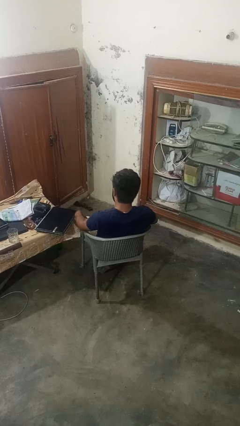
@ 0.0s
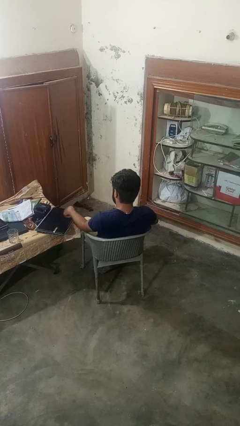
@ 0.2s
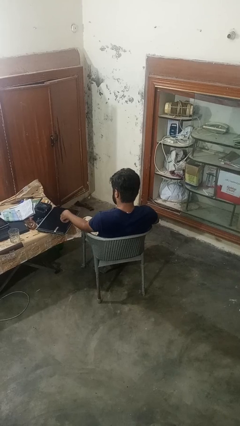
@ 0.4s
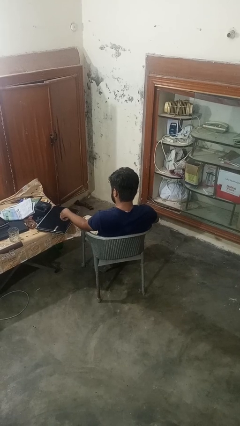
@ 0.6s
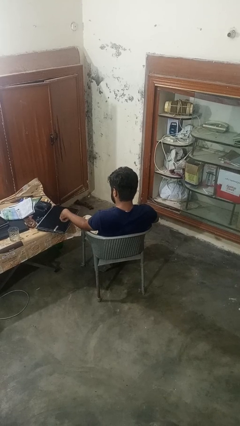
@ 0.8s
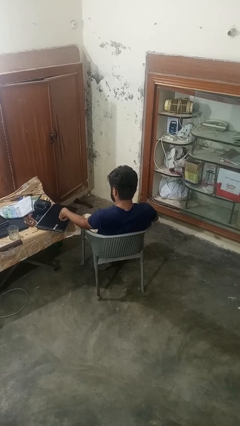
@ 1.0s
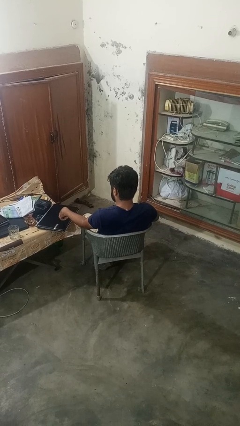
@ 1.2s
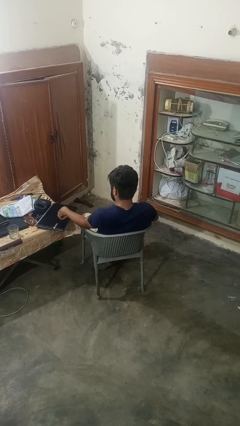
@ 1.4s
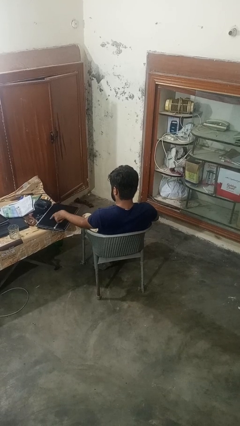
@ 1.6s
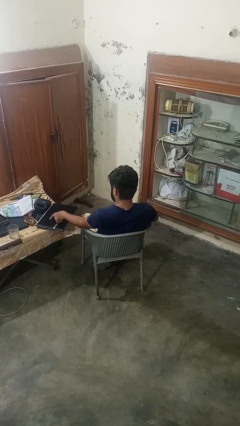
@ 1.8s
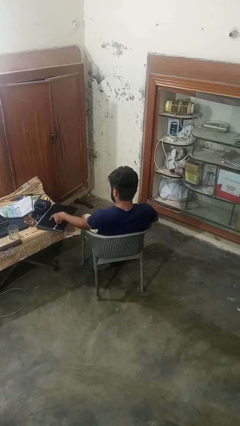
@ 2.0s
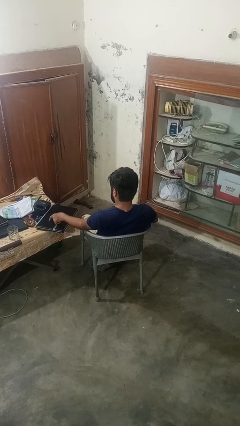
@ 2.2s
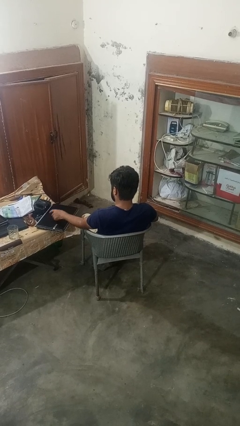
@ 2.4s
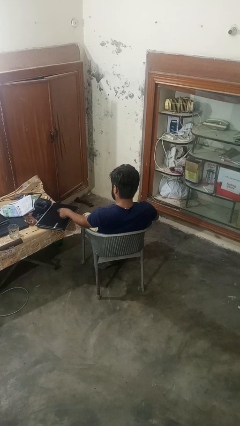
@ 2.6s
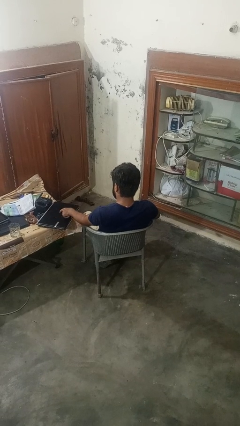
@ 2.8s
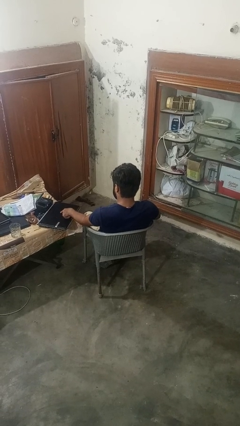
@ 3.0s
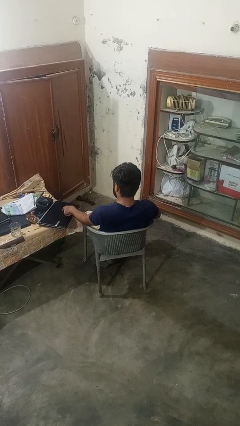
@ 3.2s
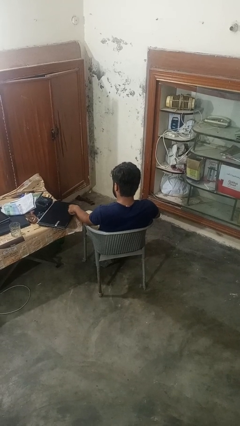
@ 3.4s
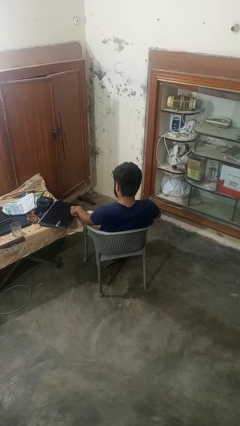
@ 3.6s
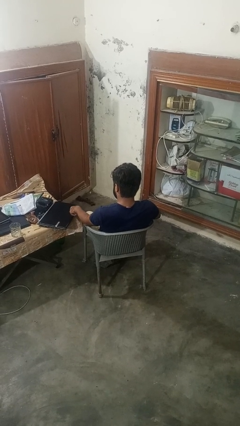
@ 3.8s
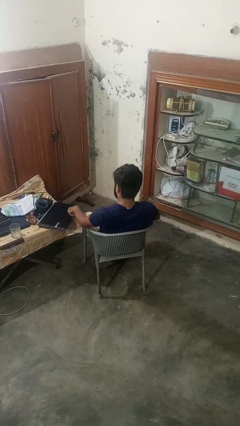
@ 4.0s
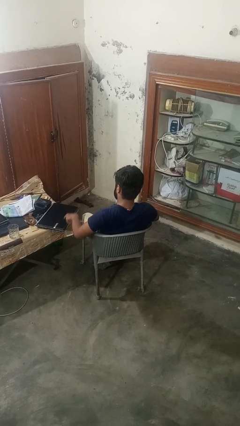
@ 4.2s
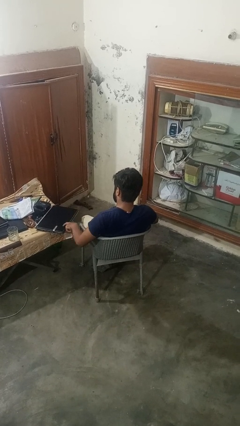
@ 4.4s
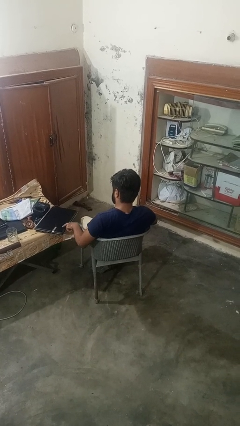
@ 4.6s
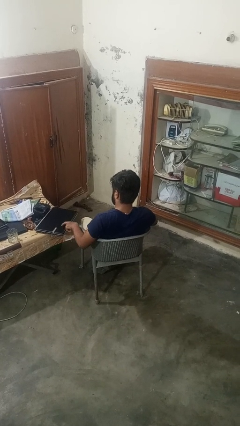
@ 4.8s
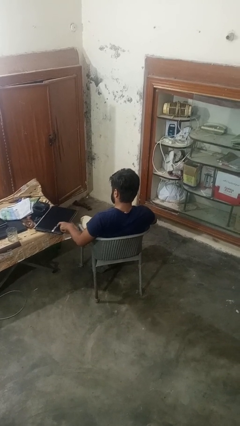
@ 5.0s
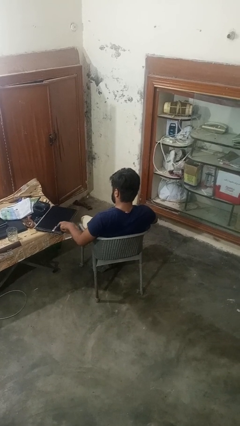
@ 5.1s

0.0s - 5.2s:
person taps object with finger

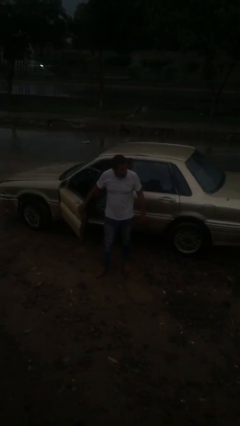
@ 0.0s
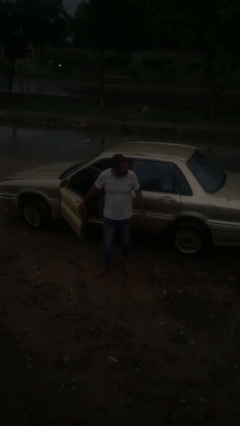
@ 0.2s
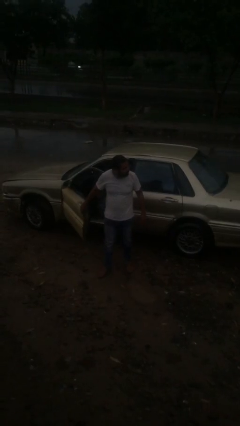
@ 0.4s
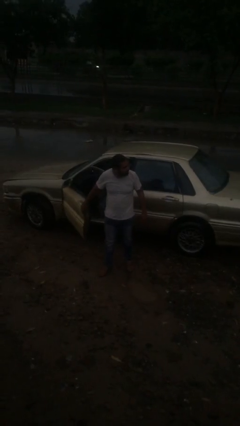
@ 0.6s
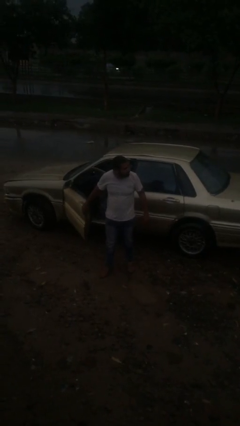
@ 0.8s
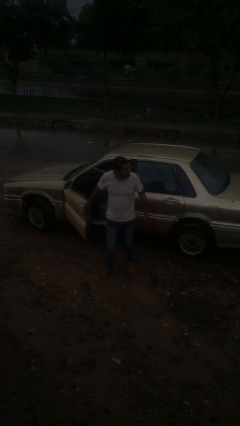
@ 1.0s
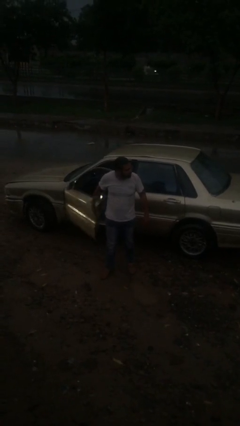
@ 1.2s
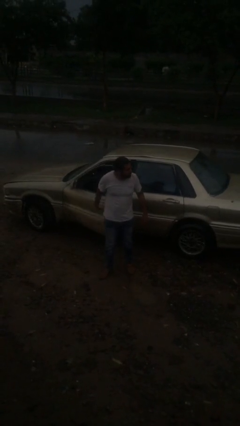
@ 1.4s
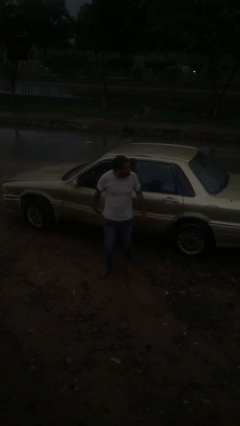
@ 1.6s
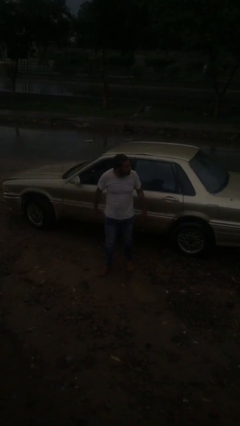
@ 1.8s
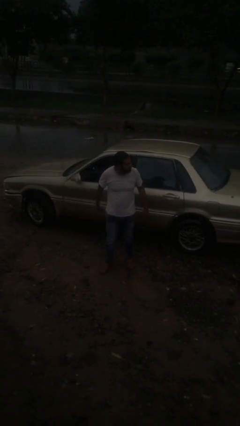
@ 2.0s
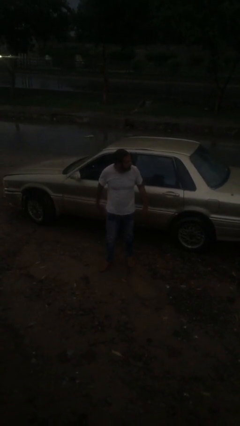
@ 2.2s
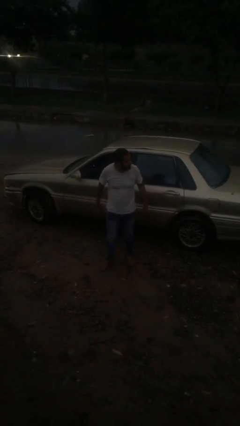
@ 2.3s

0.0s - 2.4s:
person closes car door

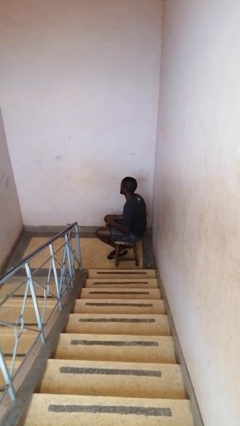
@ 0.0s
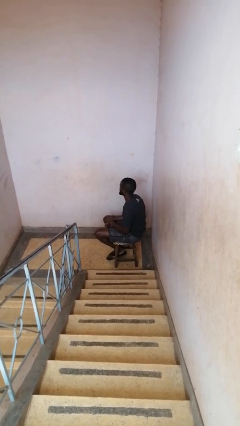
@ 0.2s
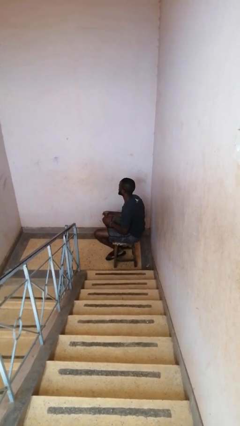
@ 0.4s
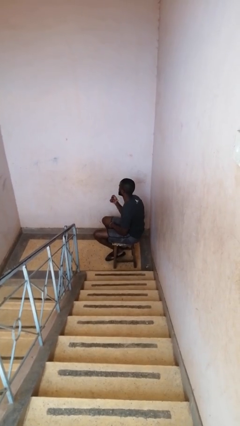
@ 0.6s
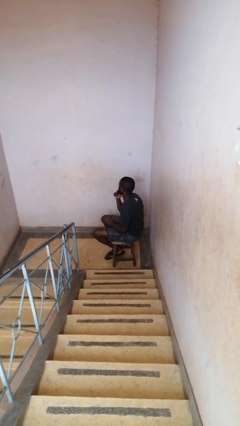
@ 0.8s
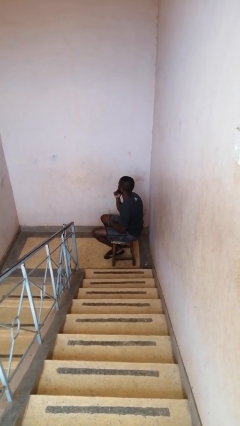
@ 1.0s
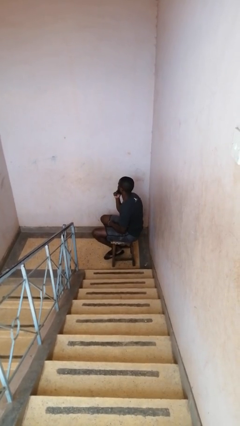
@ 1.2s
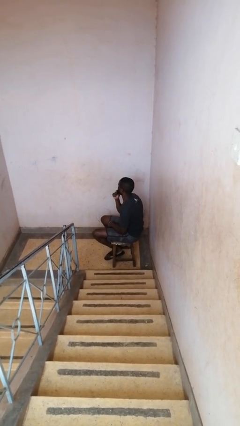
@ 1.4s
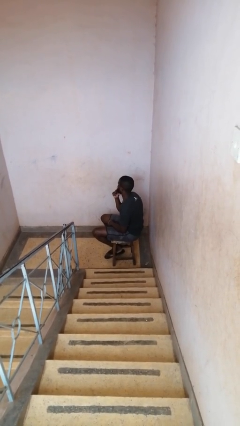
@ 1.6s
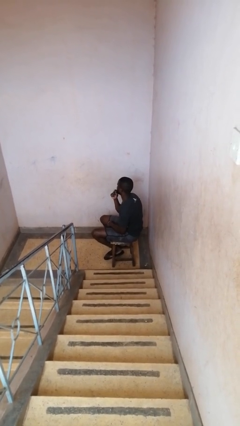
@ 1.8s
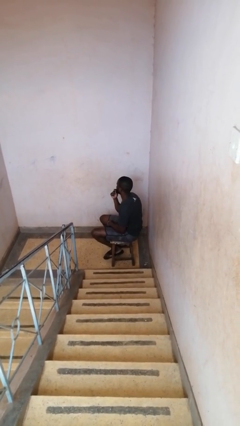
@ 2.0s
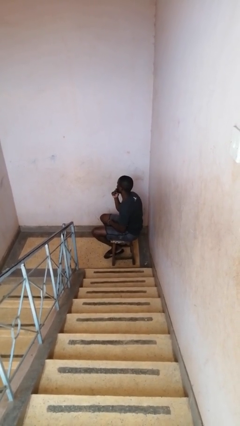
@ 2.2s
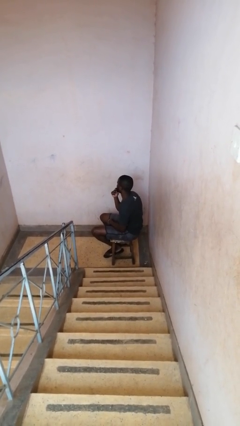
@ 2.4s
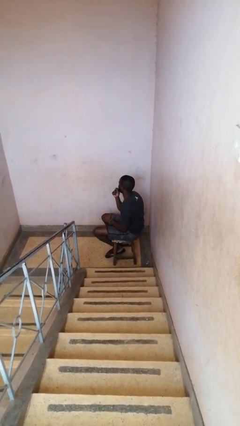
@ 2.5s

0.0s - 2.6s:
person strokes chin

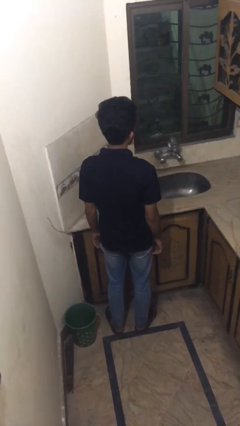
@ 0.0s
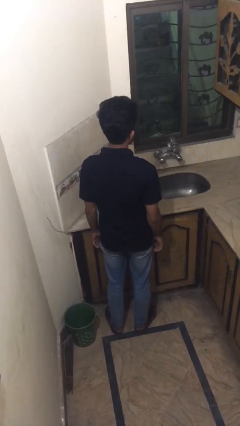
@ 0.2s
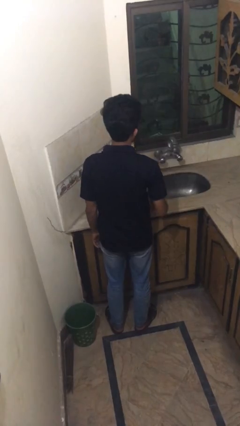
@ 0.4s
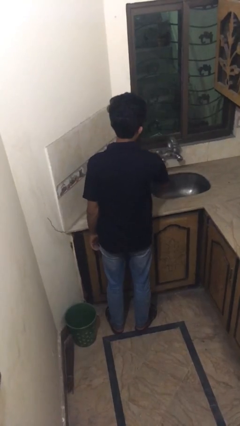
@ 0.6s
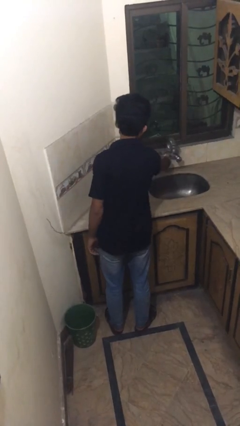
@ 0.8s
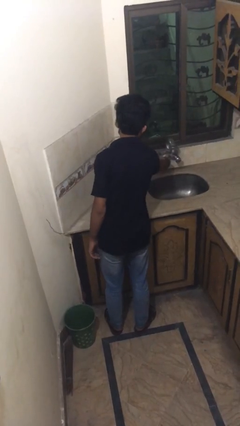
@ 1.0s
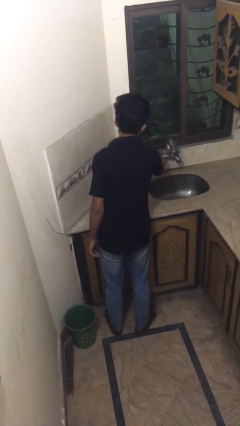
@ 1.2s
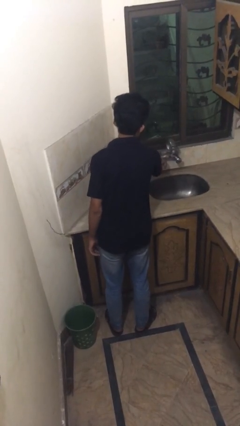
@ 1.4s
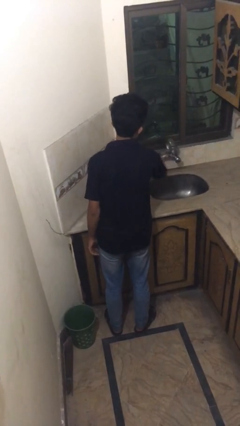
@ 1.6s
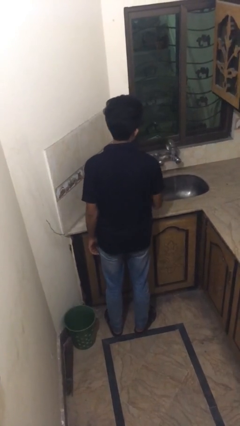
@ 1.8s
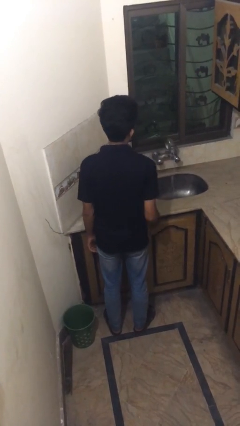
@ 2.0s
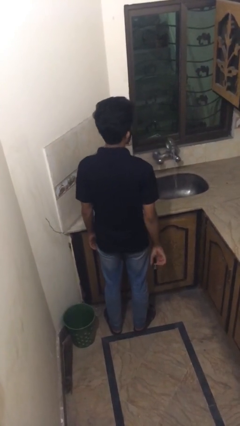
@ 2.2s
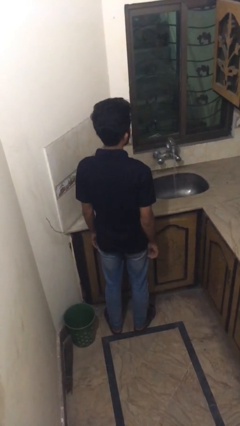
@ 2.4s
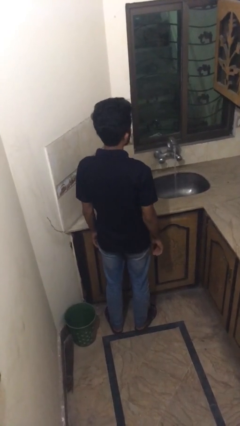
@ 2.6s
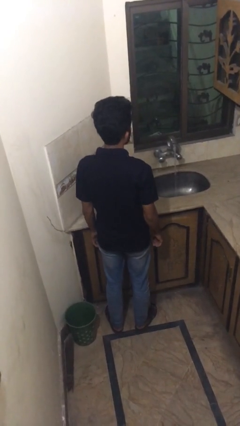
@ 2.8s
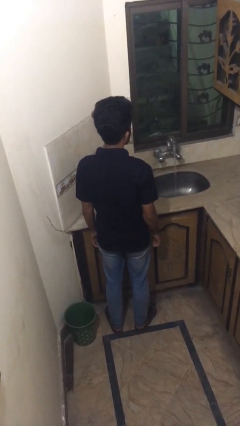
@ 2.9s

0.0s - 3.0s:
person turns on faucet

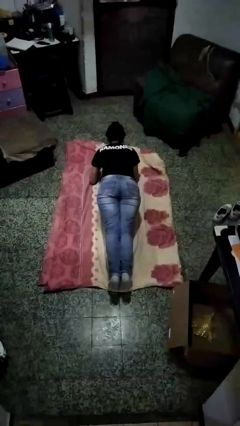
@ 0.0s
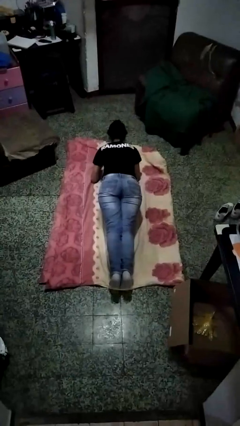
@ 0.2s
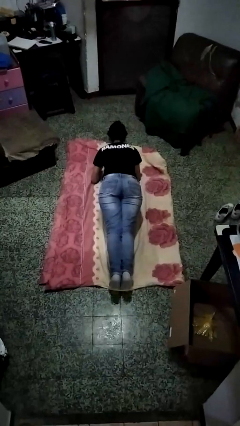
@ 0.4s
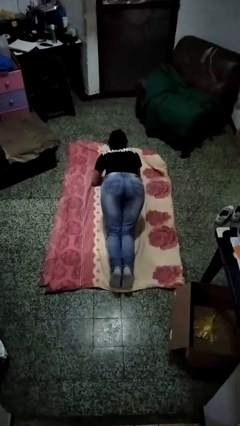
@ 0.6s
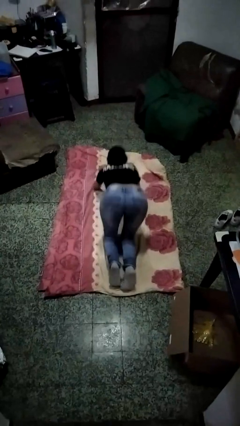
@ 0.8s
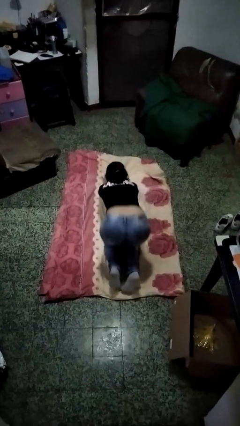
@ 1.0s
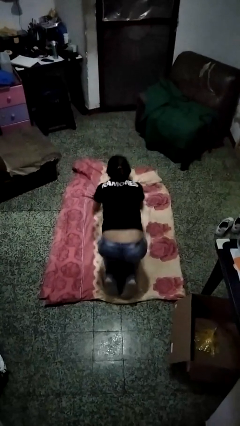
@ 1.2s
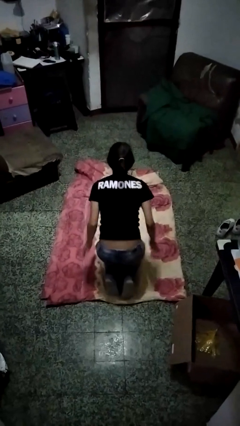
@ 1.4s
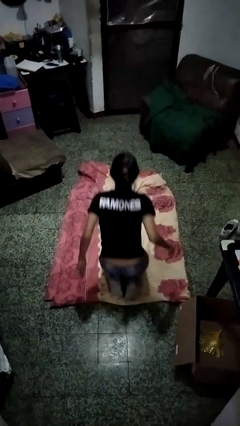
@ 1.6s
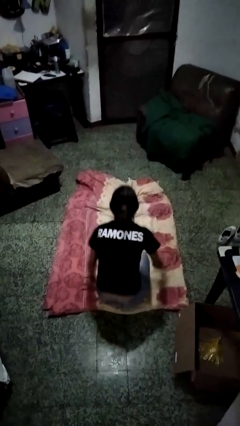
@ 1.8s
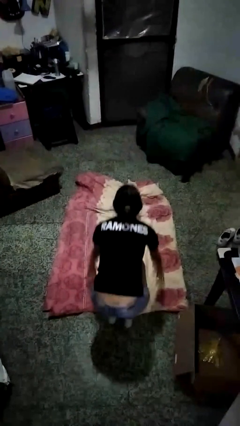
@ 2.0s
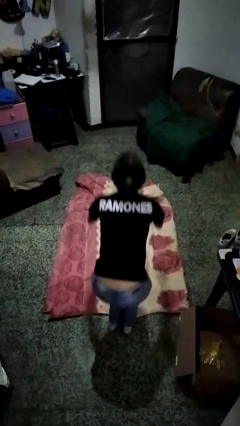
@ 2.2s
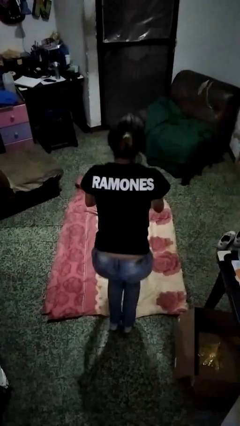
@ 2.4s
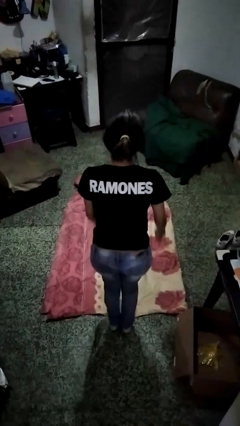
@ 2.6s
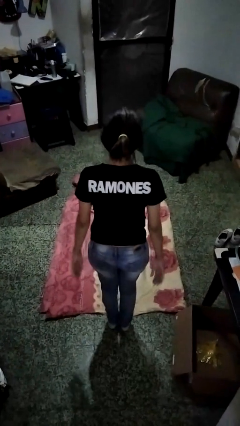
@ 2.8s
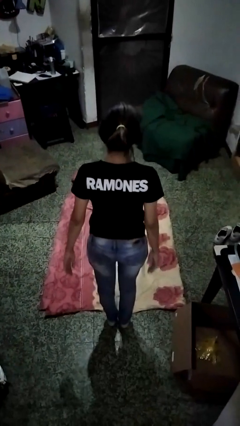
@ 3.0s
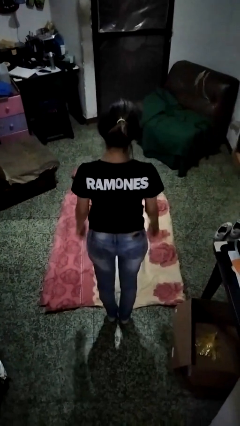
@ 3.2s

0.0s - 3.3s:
person stands up from floor

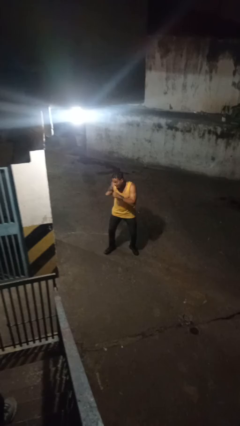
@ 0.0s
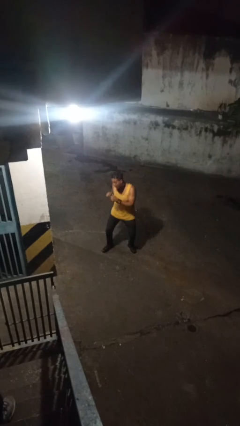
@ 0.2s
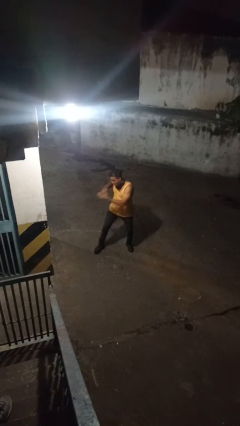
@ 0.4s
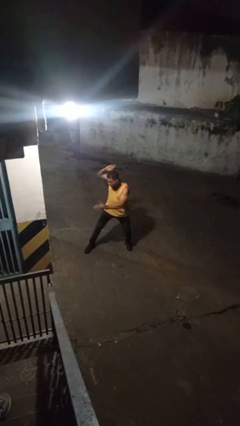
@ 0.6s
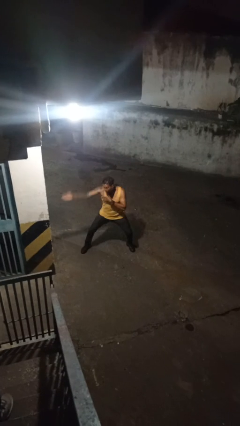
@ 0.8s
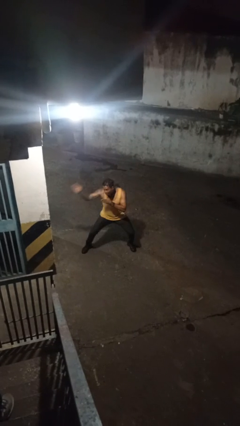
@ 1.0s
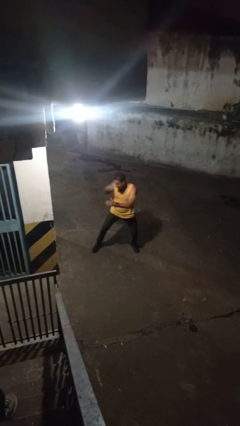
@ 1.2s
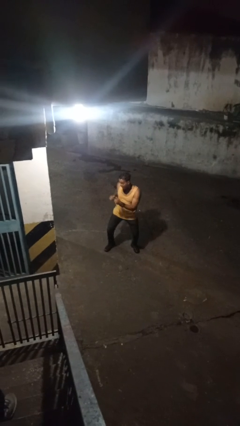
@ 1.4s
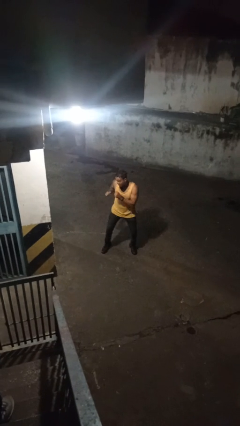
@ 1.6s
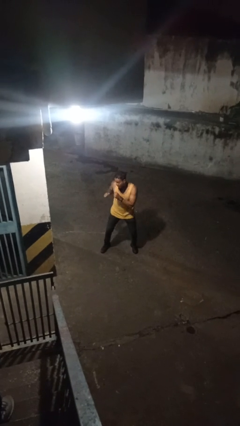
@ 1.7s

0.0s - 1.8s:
person karate chop
